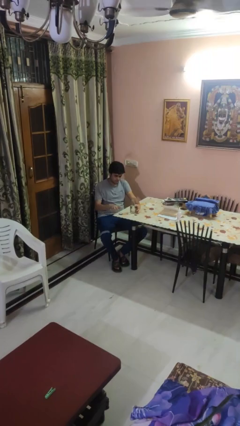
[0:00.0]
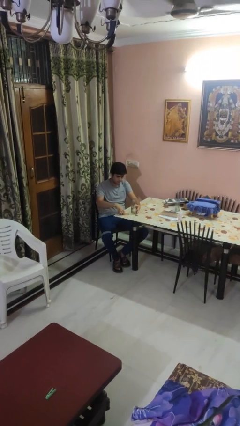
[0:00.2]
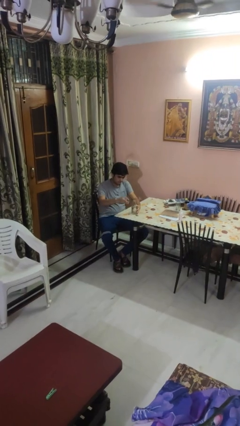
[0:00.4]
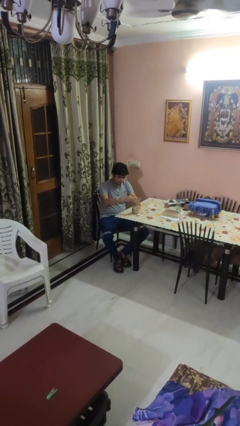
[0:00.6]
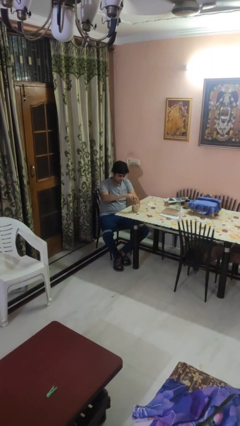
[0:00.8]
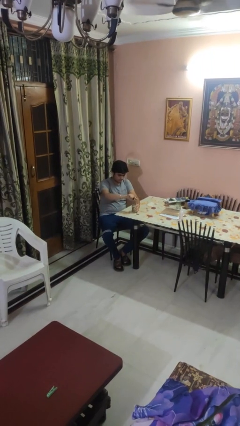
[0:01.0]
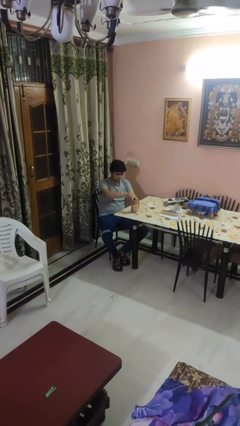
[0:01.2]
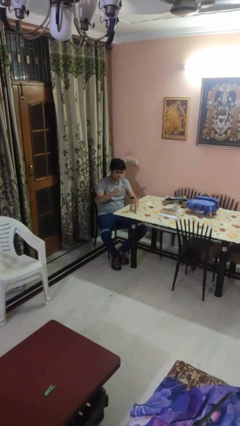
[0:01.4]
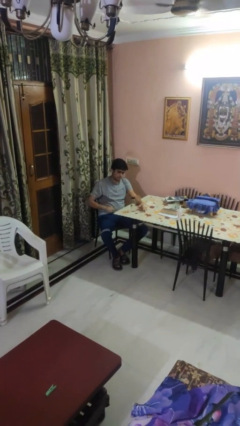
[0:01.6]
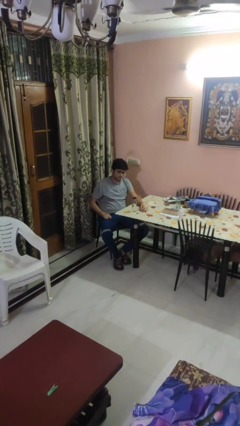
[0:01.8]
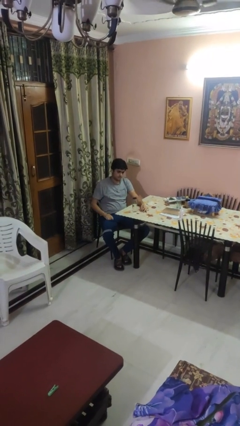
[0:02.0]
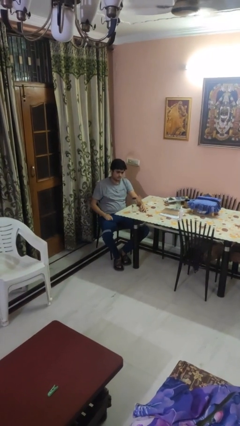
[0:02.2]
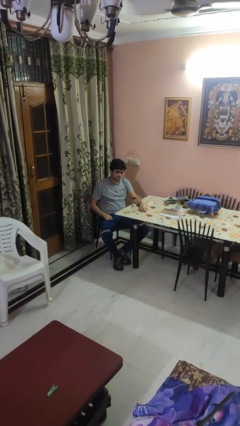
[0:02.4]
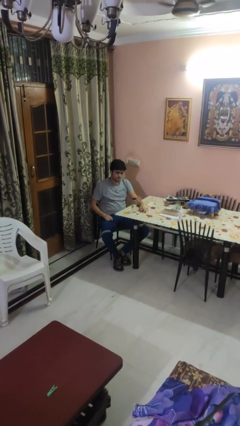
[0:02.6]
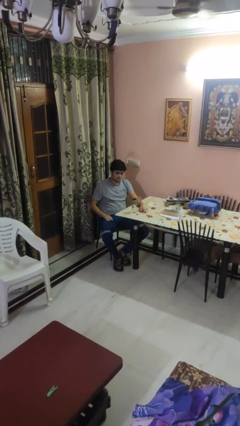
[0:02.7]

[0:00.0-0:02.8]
person screws lid to bottle

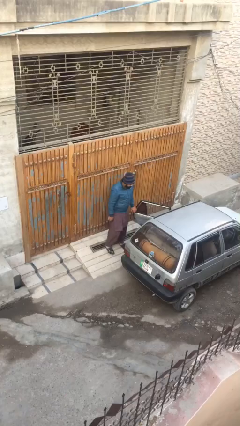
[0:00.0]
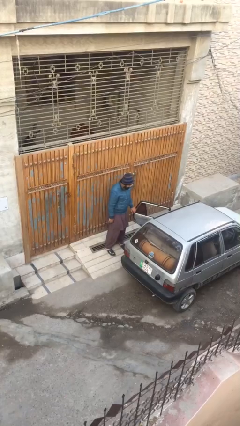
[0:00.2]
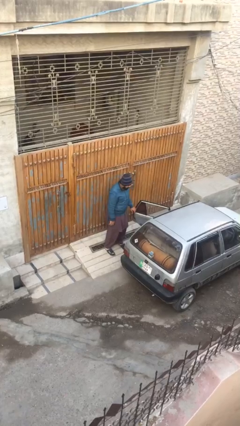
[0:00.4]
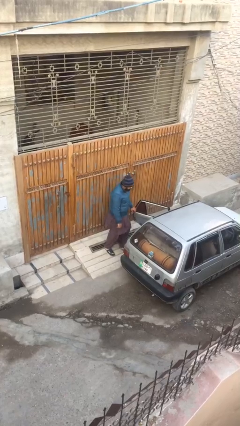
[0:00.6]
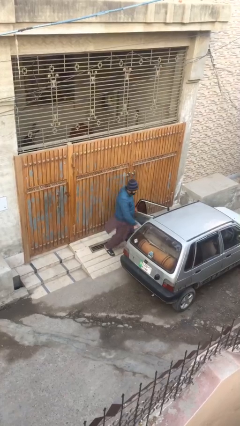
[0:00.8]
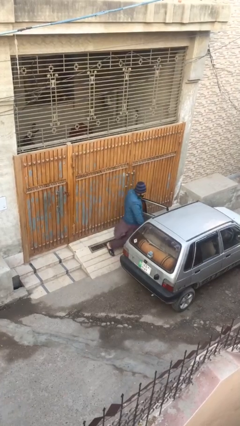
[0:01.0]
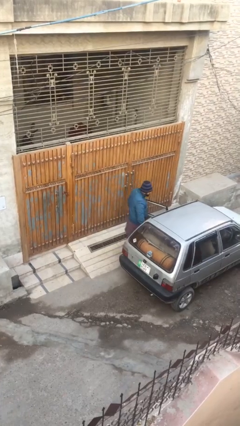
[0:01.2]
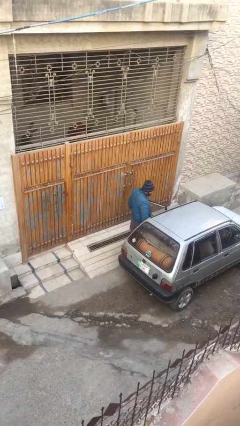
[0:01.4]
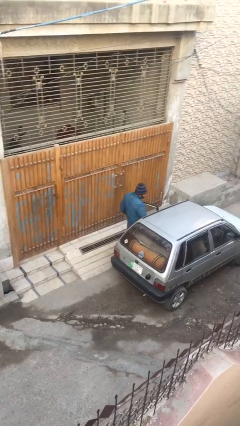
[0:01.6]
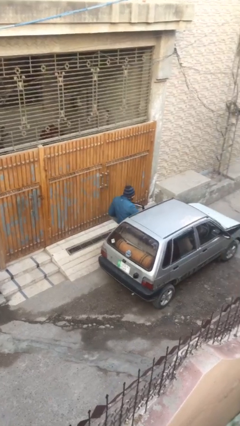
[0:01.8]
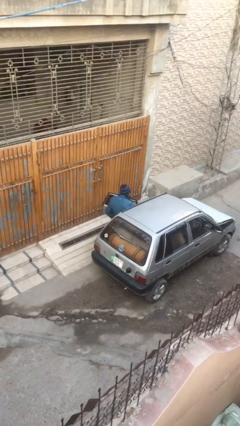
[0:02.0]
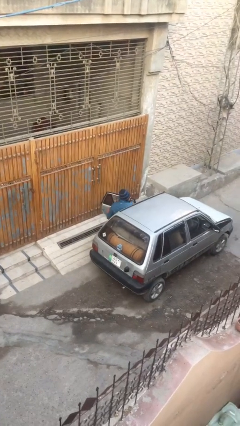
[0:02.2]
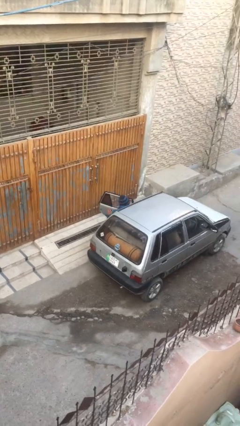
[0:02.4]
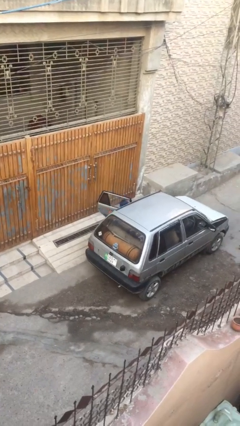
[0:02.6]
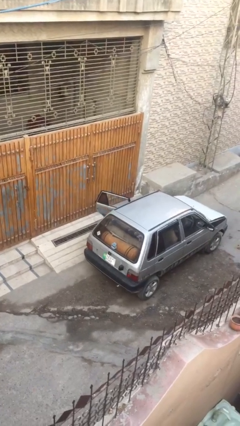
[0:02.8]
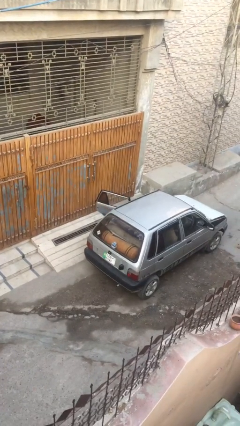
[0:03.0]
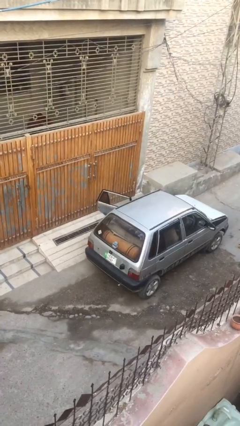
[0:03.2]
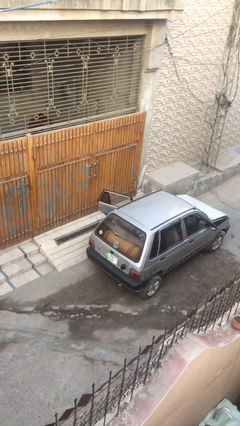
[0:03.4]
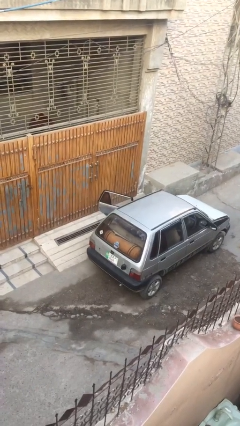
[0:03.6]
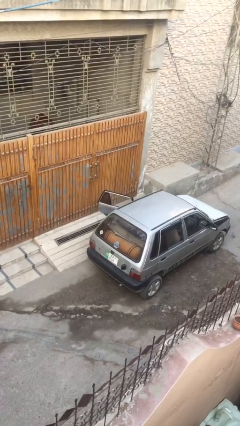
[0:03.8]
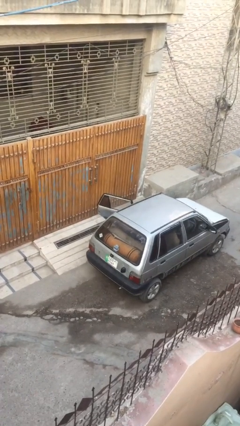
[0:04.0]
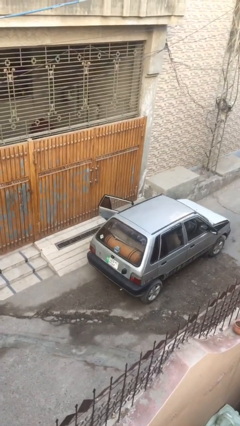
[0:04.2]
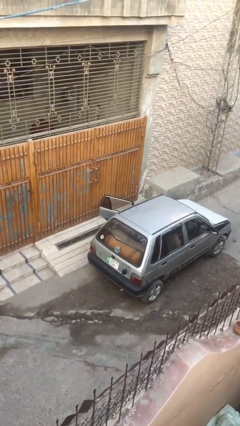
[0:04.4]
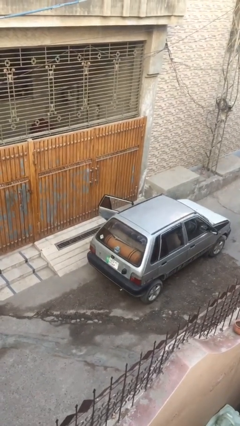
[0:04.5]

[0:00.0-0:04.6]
person enters car

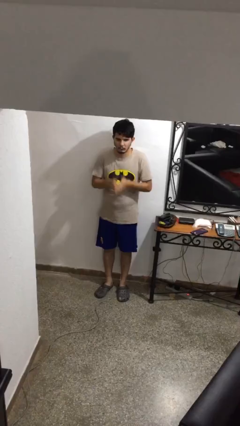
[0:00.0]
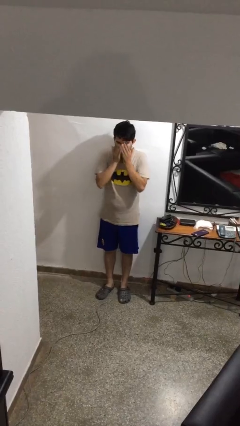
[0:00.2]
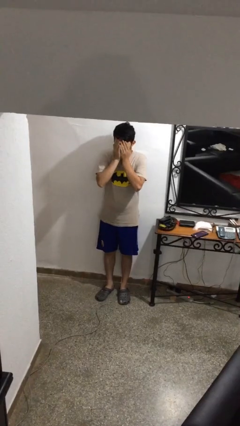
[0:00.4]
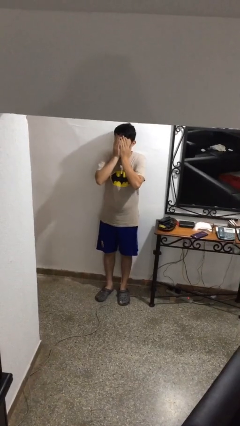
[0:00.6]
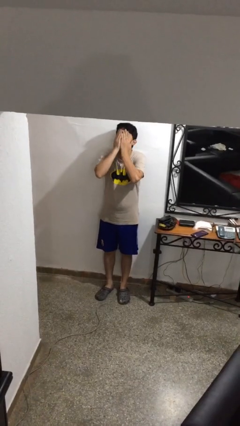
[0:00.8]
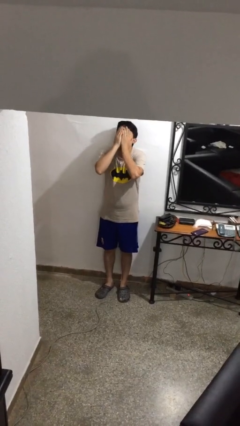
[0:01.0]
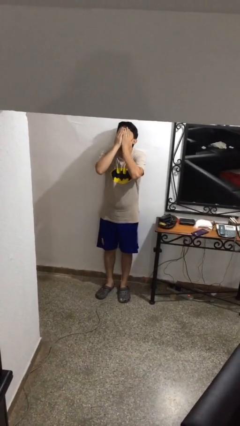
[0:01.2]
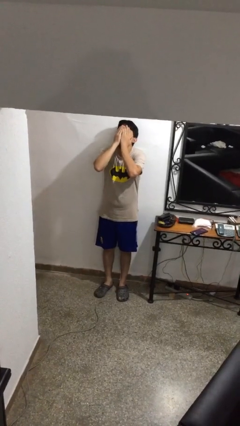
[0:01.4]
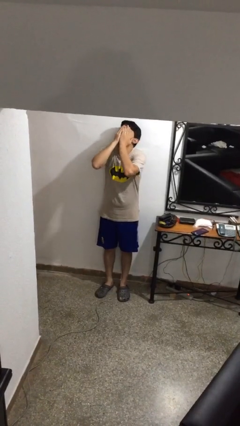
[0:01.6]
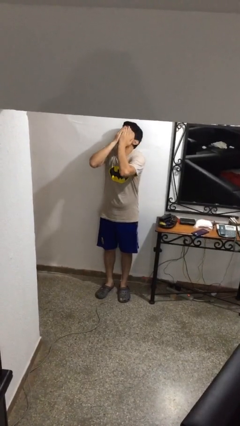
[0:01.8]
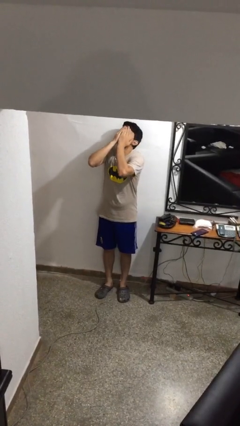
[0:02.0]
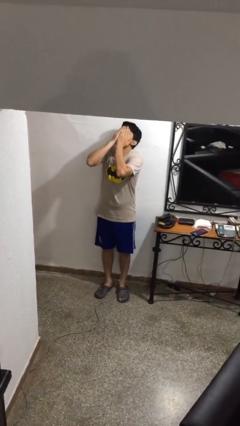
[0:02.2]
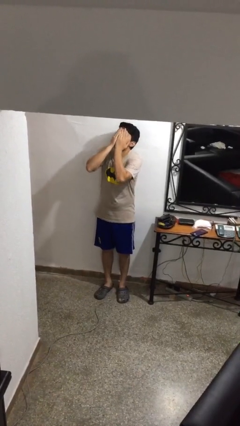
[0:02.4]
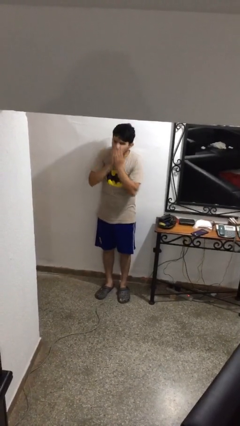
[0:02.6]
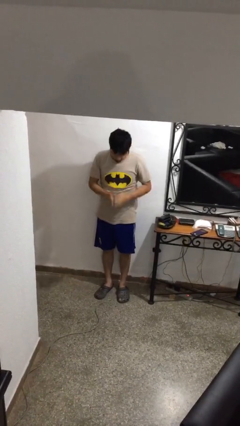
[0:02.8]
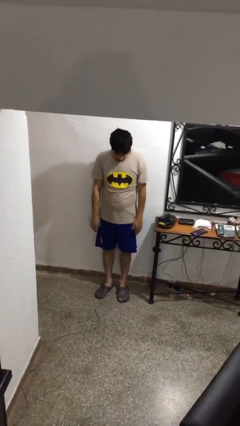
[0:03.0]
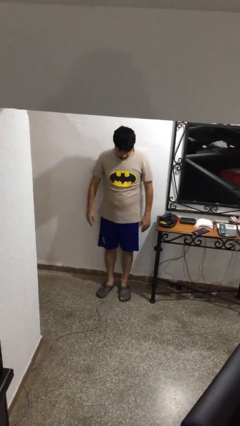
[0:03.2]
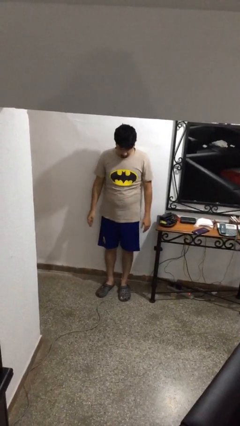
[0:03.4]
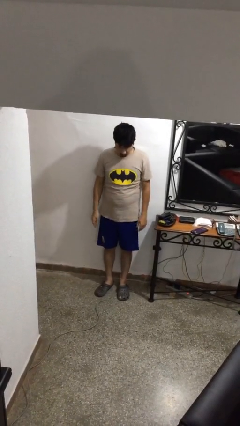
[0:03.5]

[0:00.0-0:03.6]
person covers face with hands

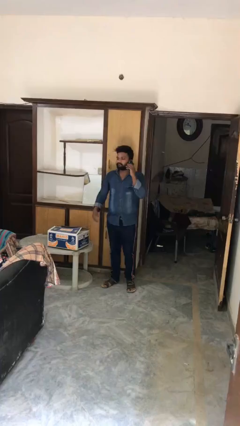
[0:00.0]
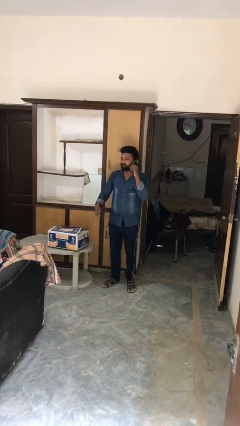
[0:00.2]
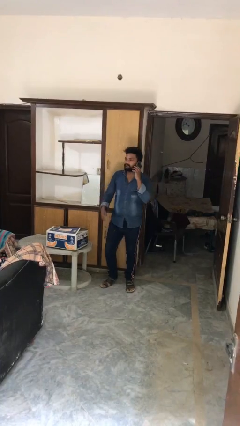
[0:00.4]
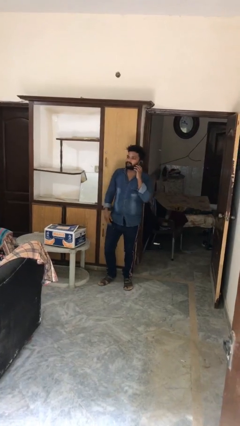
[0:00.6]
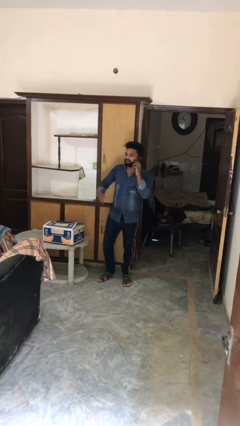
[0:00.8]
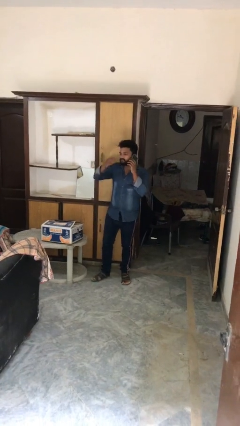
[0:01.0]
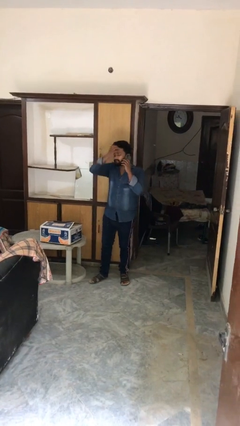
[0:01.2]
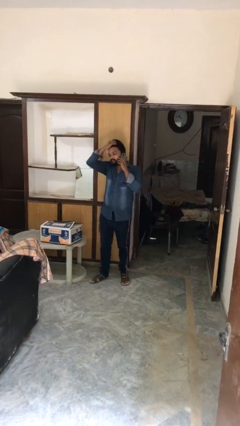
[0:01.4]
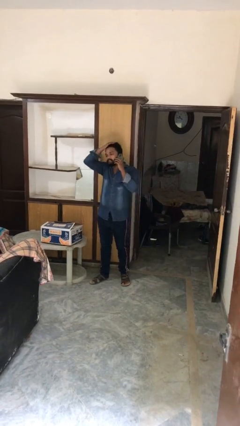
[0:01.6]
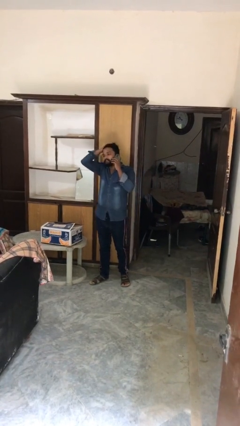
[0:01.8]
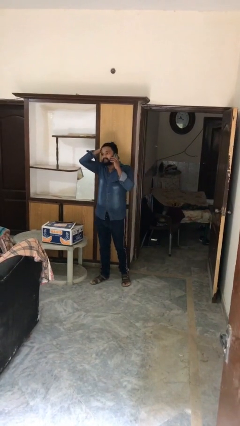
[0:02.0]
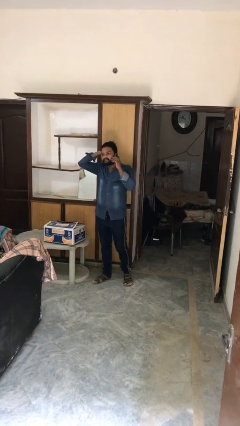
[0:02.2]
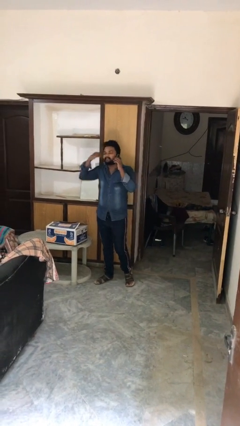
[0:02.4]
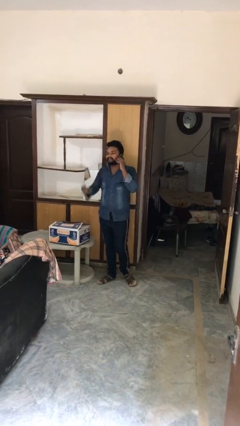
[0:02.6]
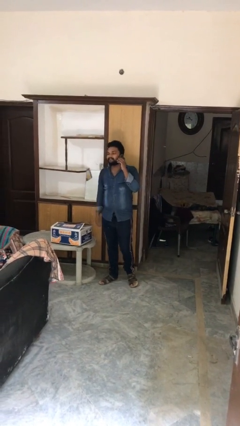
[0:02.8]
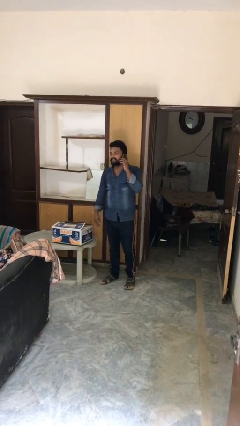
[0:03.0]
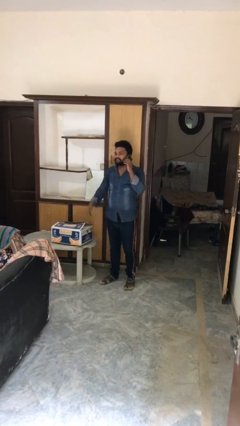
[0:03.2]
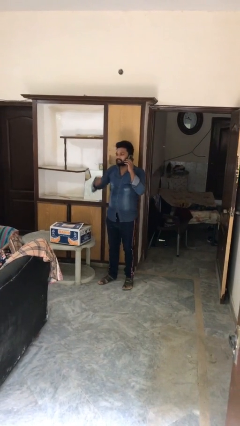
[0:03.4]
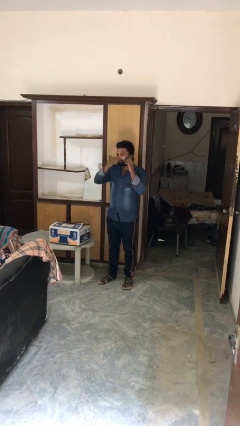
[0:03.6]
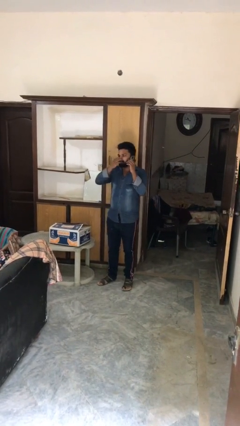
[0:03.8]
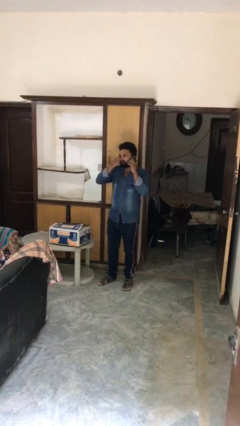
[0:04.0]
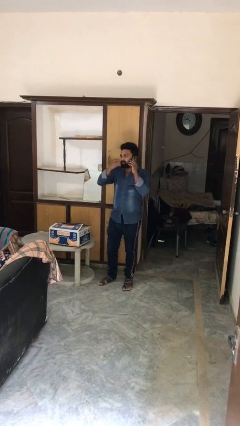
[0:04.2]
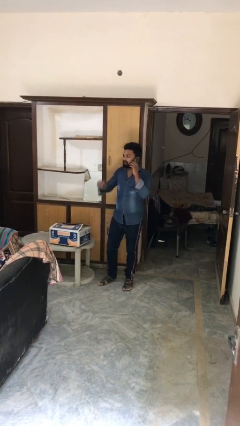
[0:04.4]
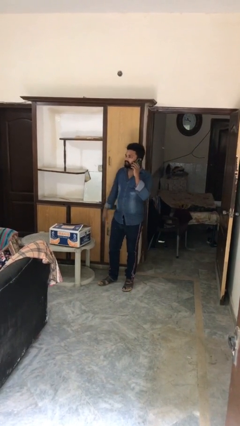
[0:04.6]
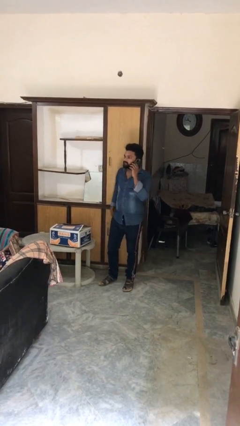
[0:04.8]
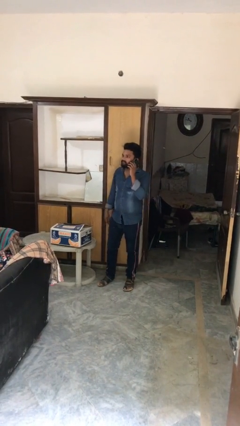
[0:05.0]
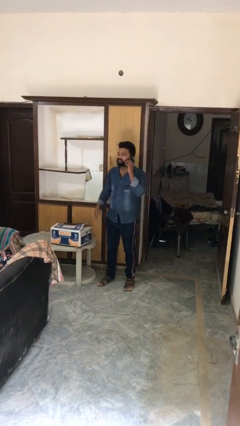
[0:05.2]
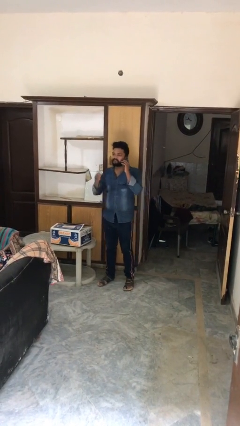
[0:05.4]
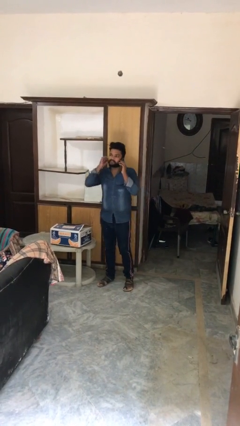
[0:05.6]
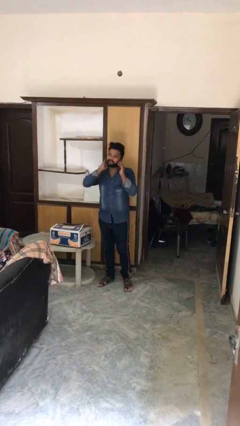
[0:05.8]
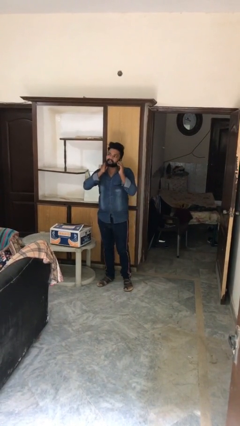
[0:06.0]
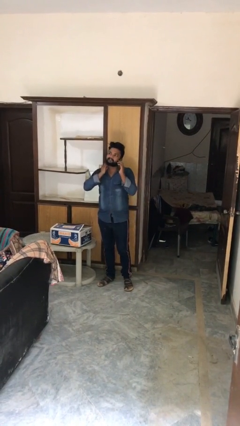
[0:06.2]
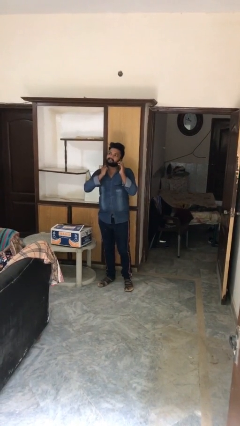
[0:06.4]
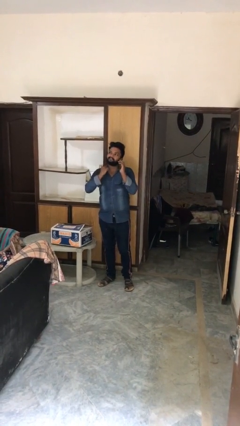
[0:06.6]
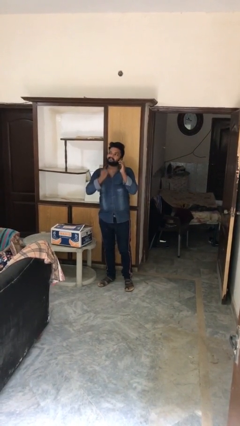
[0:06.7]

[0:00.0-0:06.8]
person talks on phone
